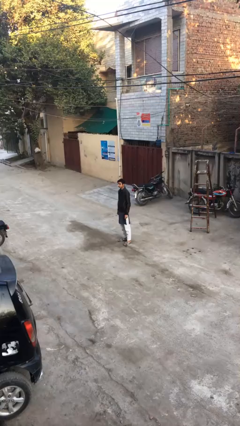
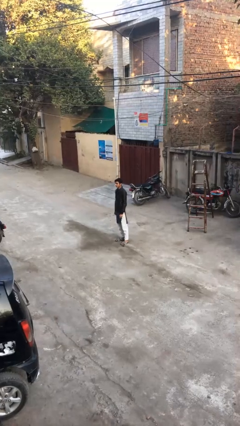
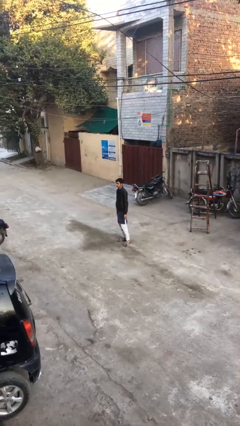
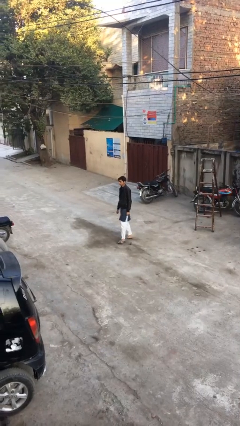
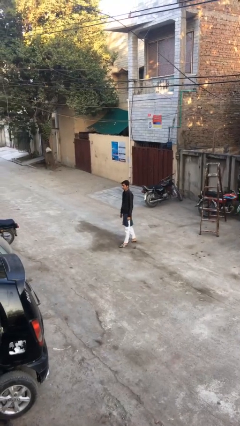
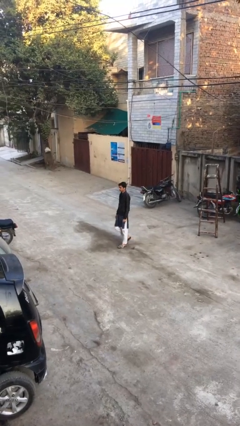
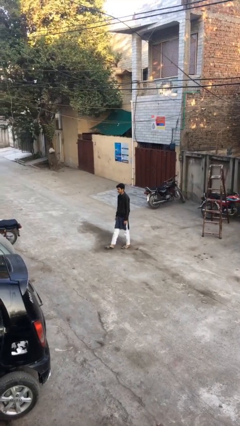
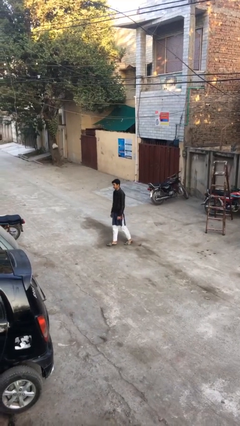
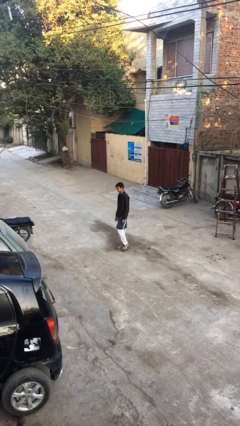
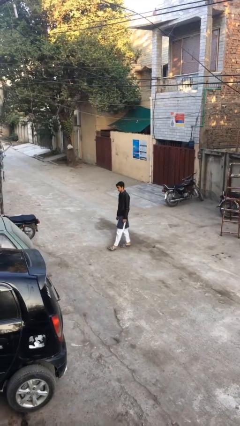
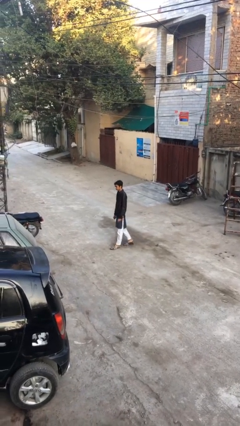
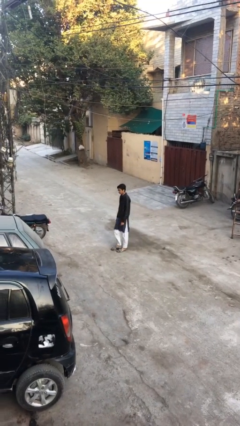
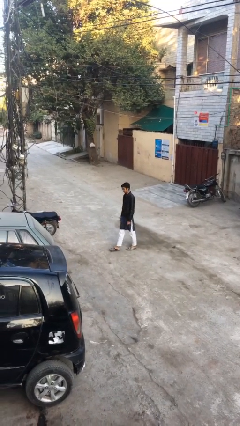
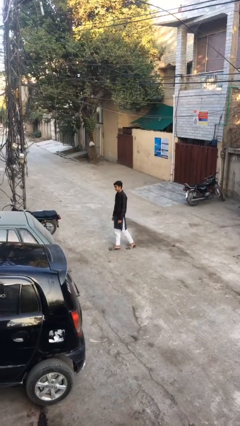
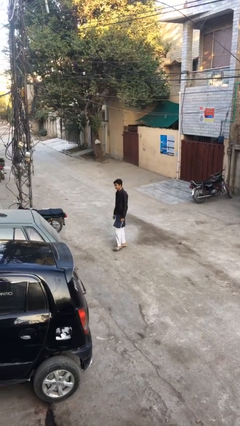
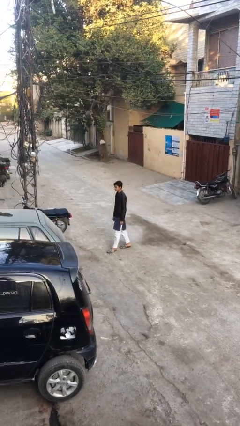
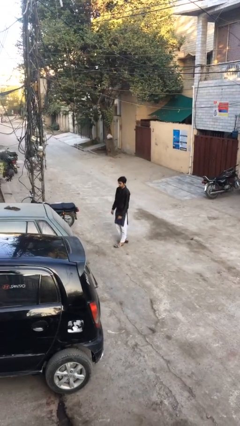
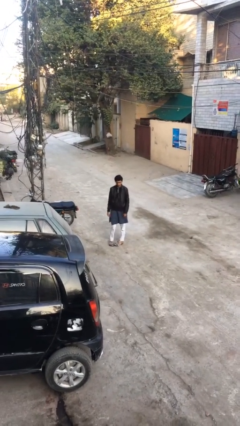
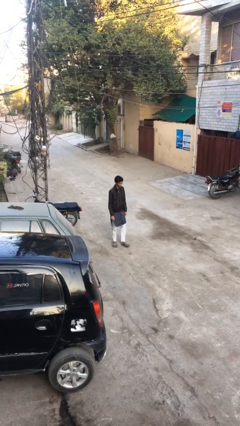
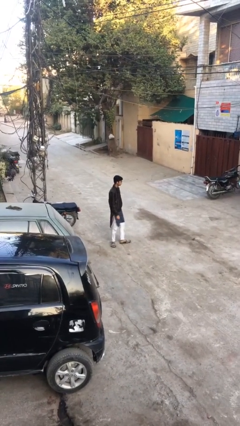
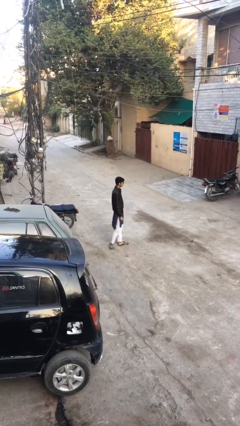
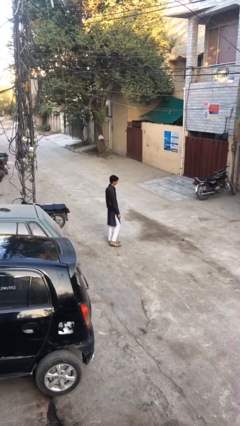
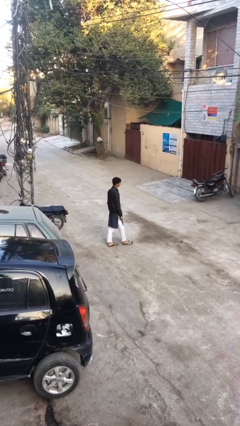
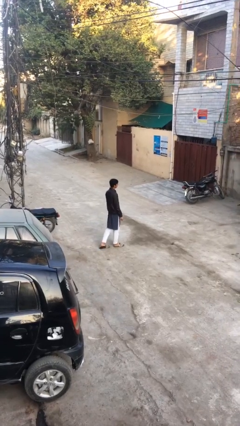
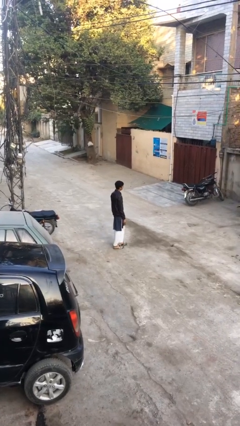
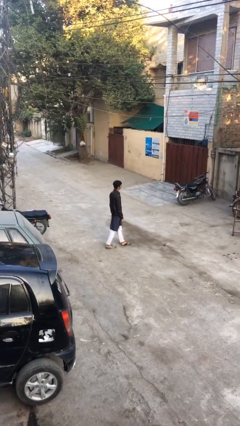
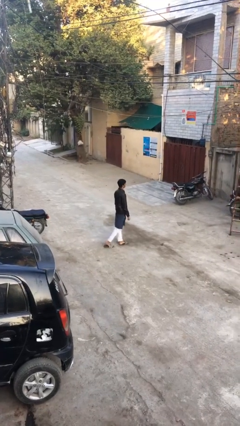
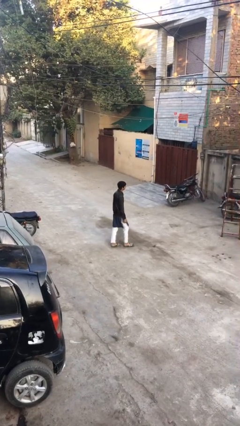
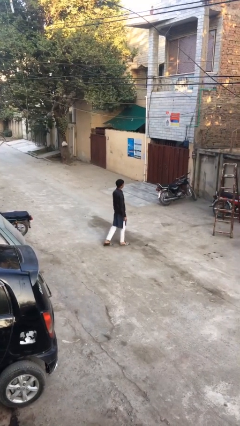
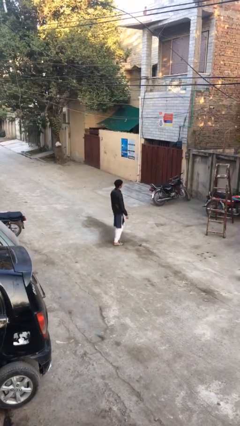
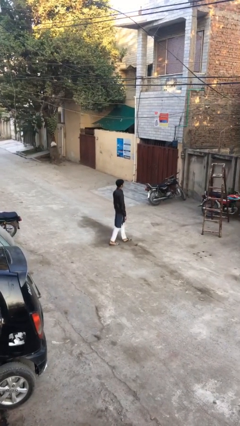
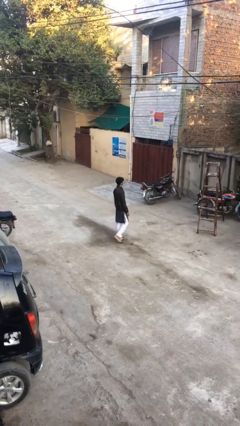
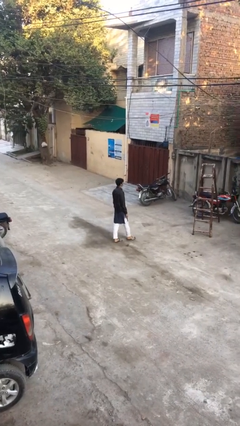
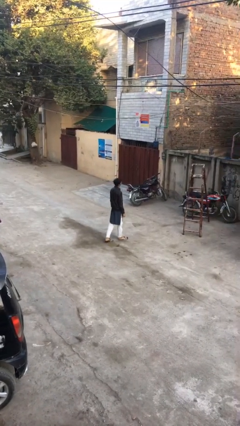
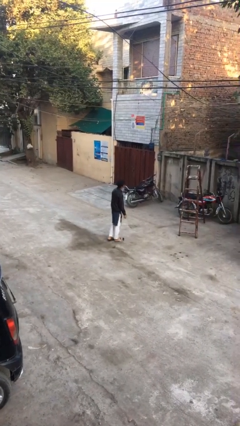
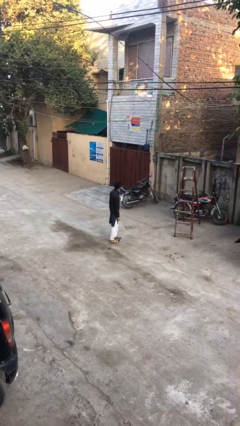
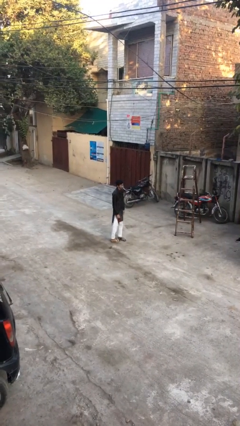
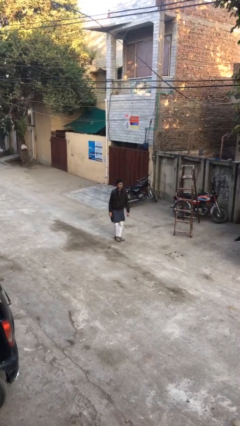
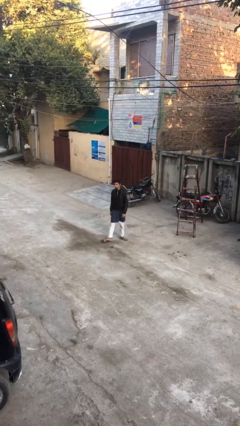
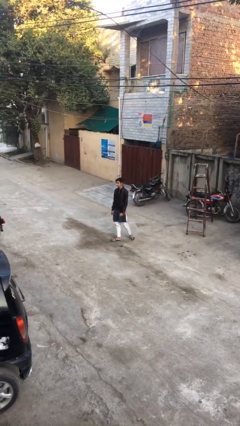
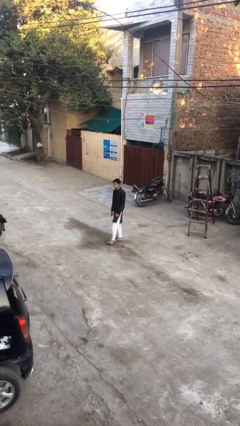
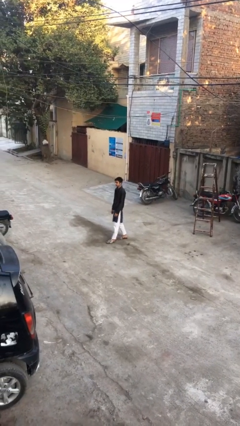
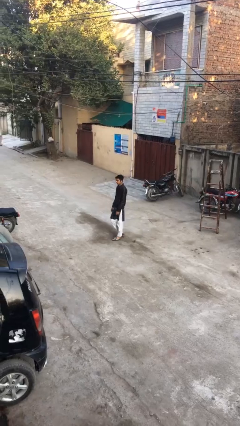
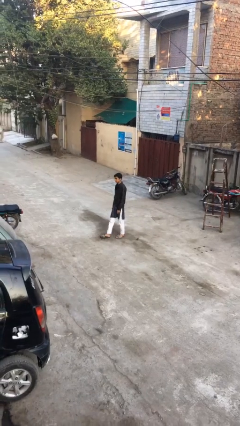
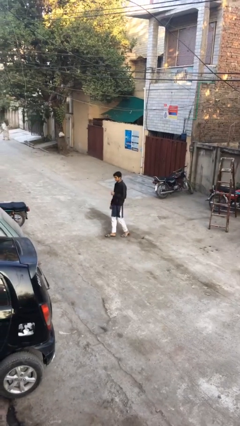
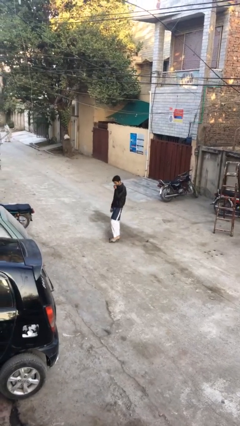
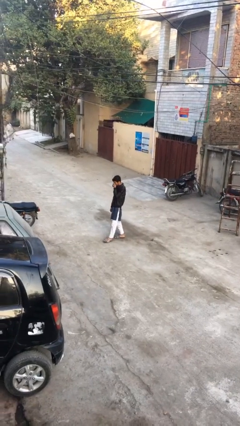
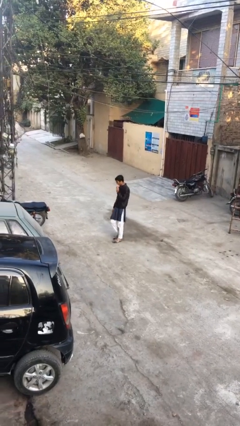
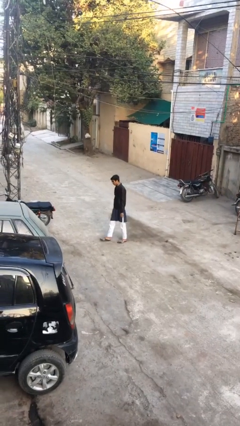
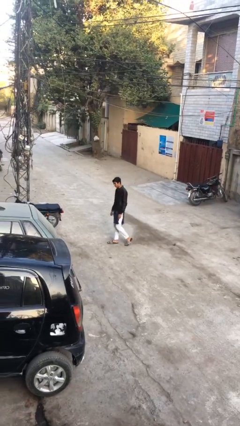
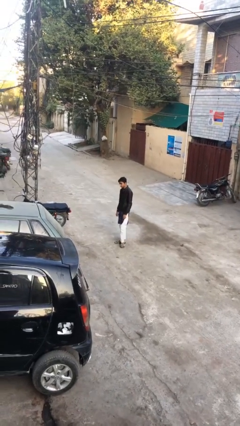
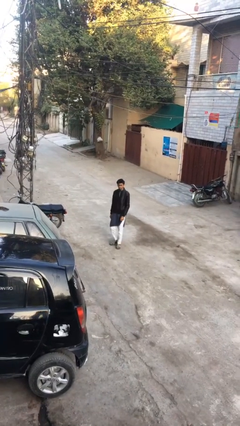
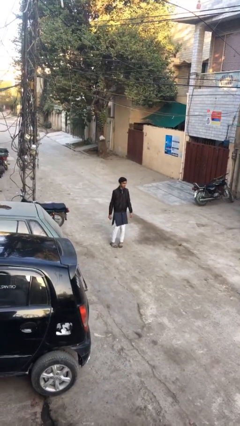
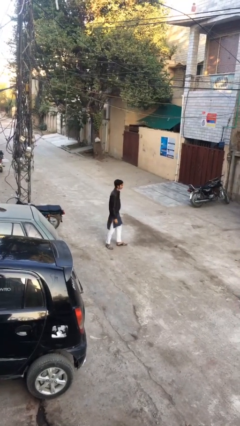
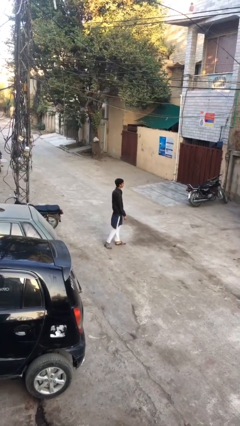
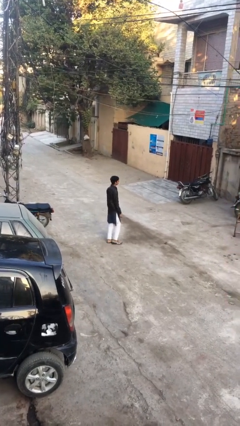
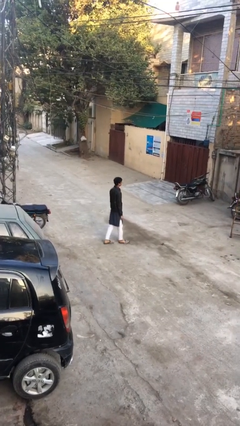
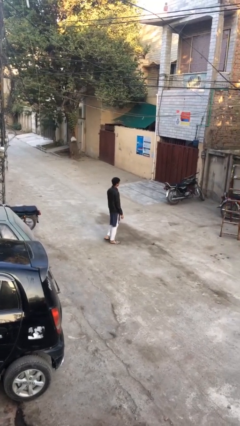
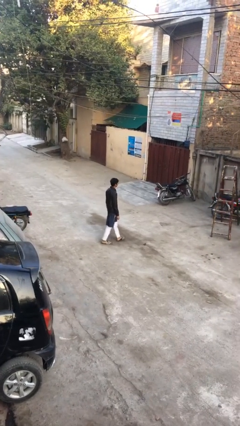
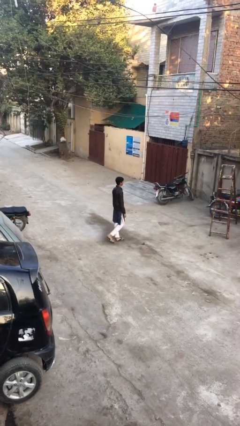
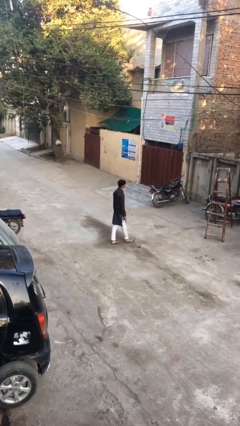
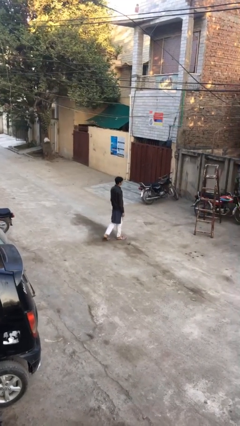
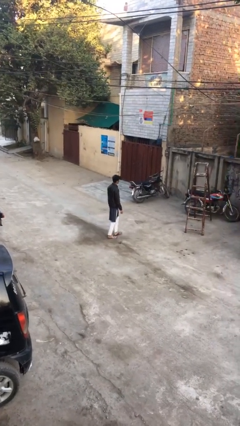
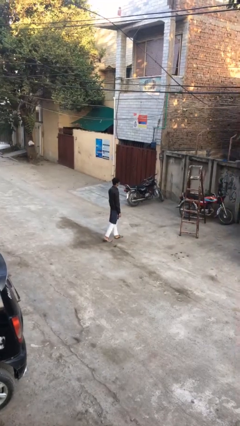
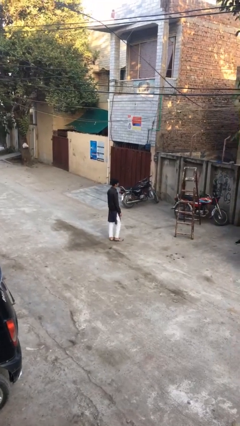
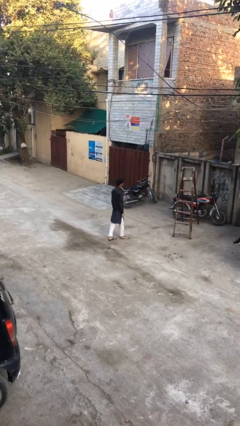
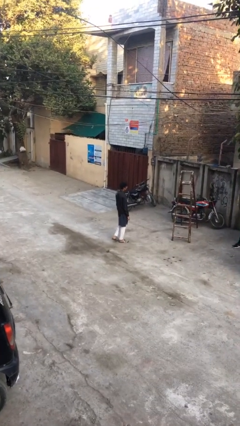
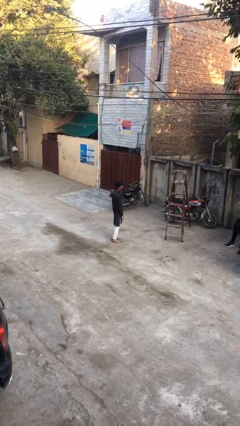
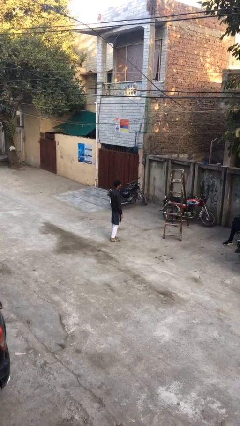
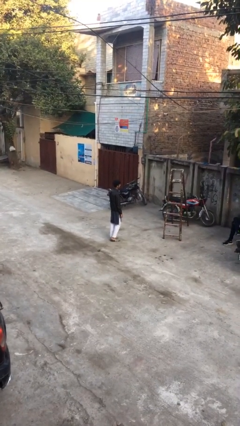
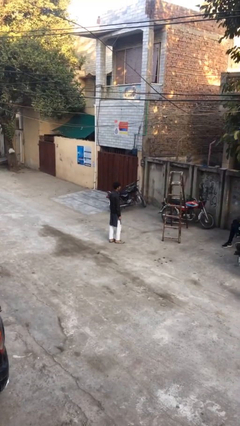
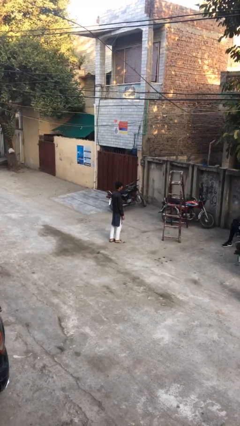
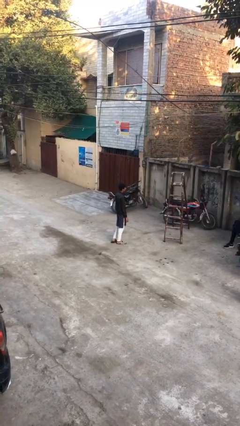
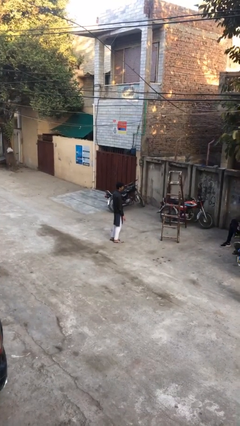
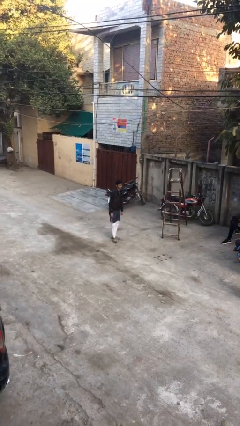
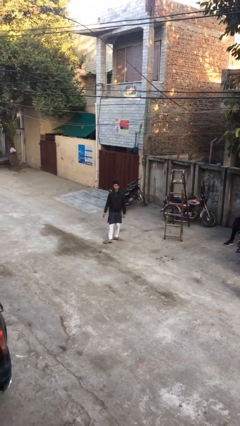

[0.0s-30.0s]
person walks

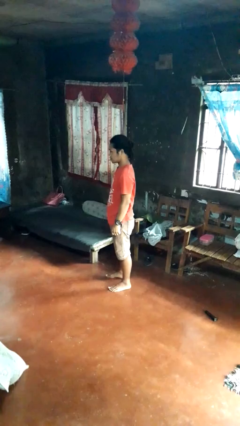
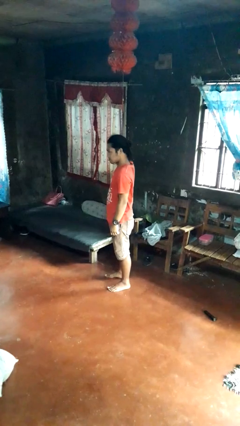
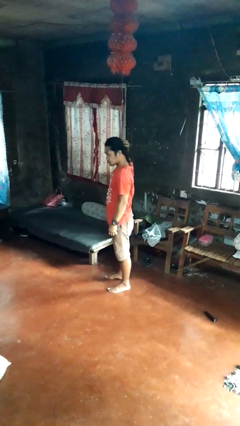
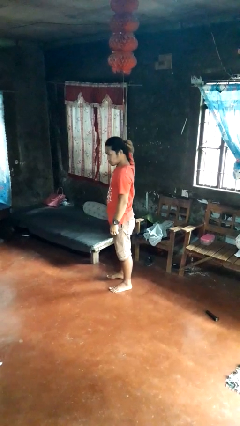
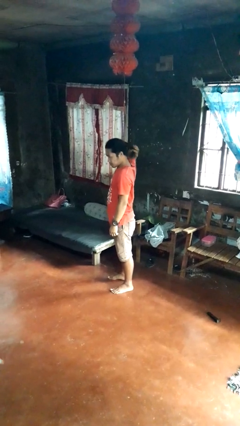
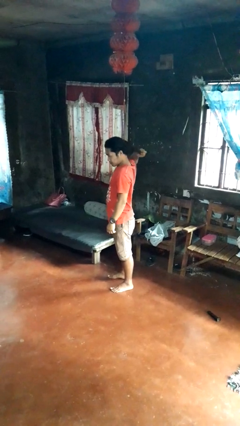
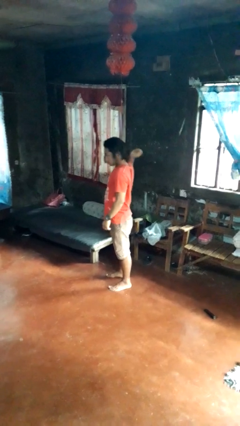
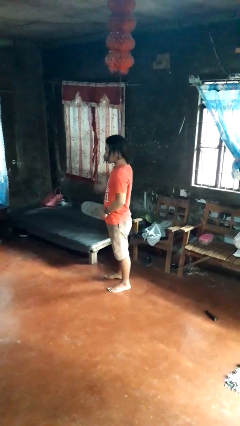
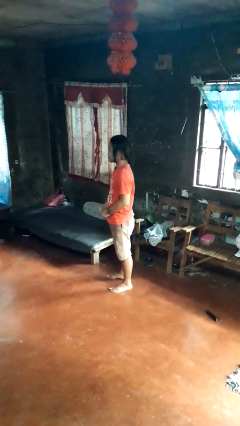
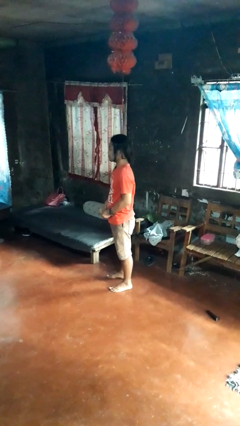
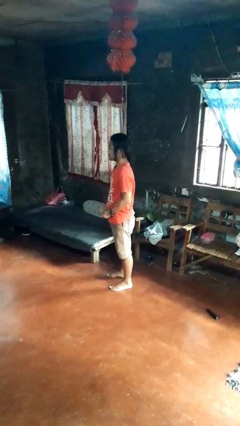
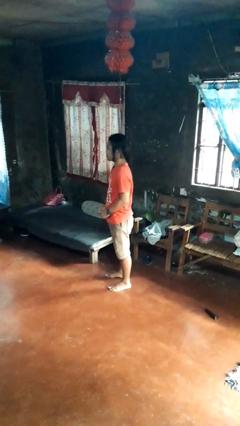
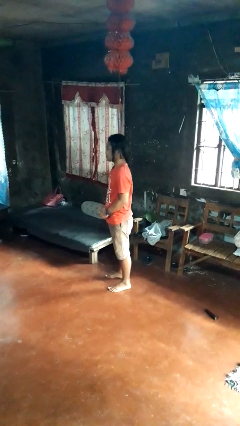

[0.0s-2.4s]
person takes off hairtie

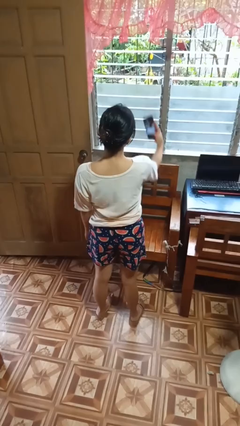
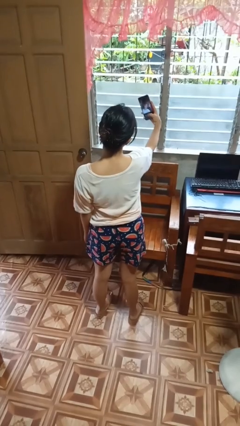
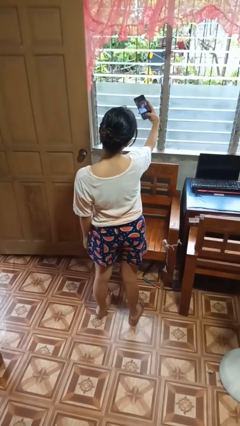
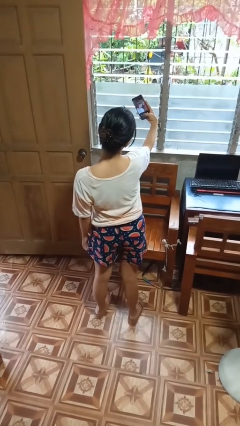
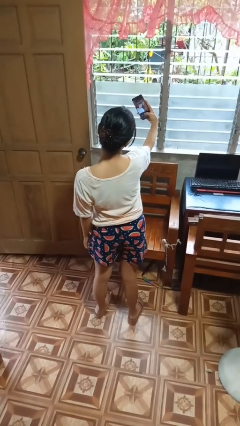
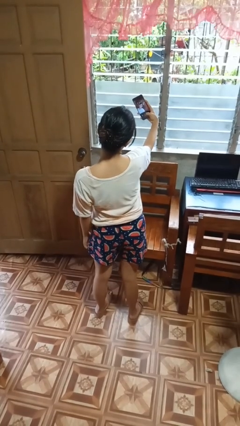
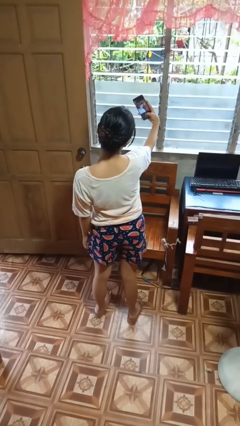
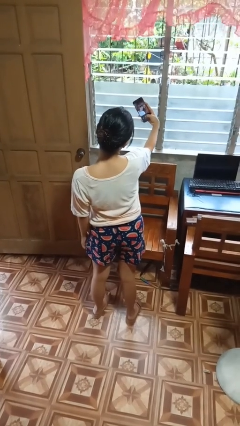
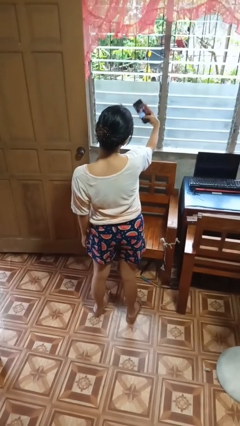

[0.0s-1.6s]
person takes selfie
